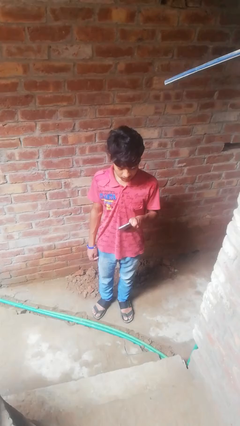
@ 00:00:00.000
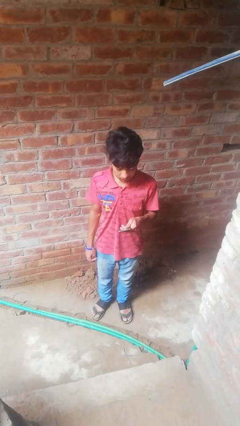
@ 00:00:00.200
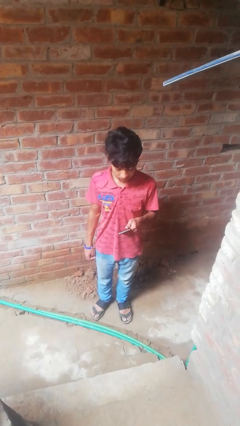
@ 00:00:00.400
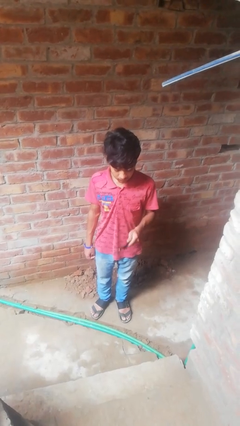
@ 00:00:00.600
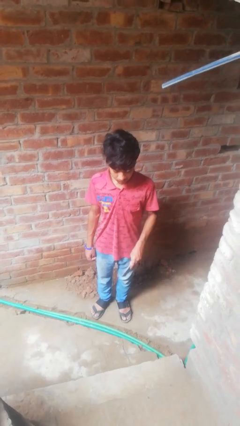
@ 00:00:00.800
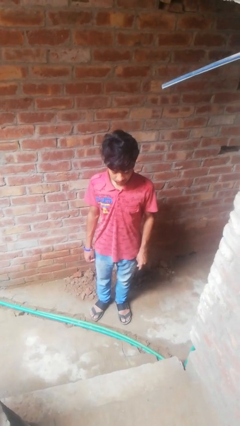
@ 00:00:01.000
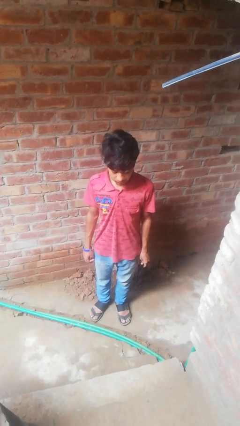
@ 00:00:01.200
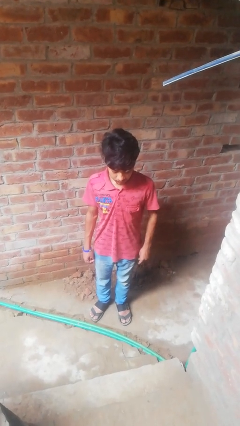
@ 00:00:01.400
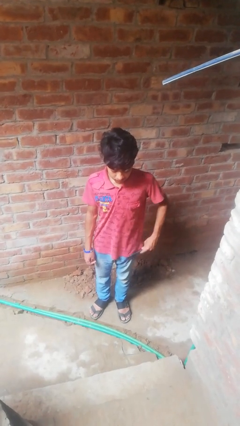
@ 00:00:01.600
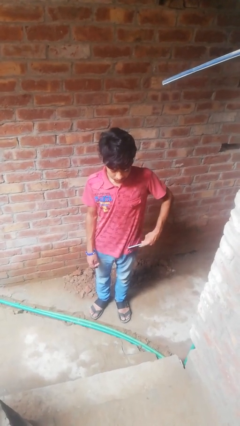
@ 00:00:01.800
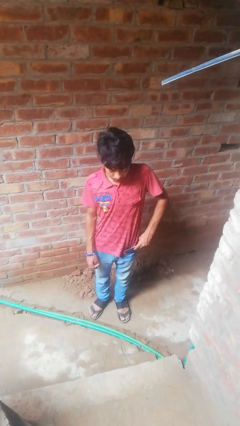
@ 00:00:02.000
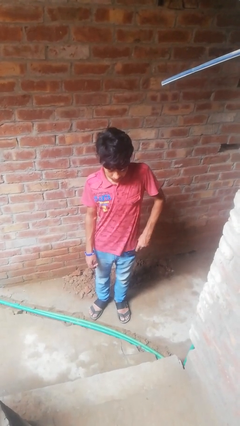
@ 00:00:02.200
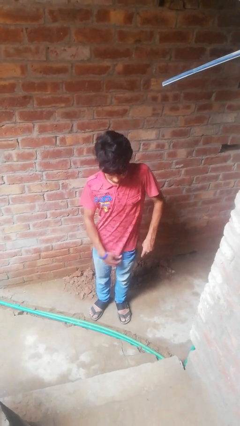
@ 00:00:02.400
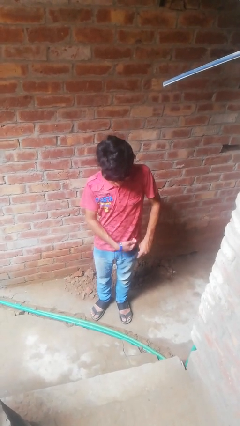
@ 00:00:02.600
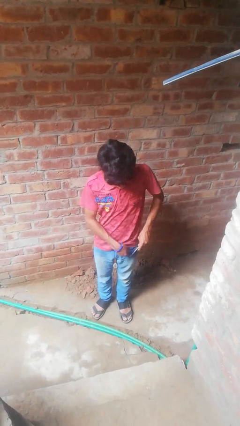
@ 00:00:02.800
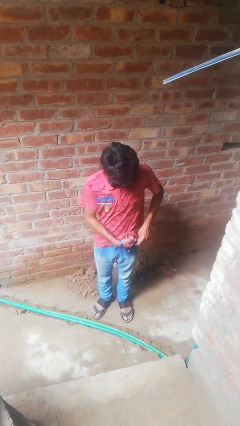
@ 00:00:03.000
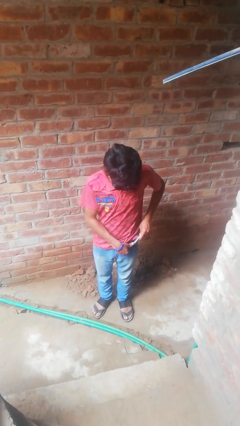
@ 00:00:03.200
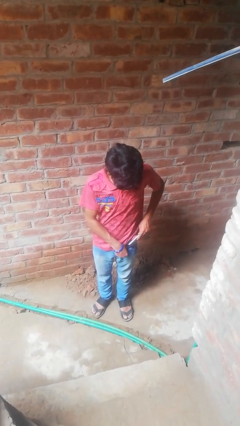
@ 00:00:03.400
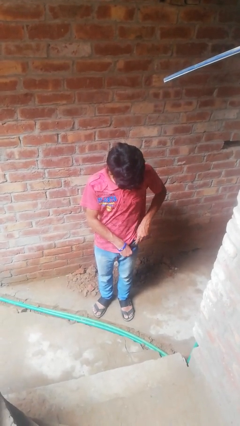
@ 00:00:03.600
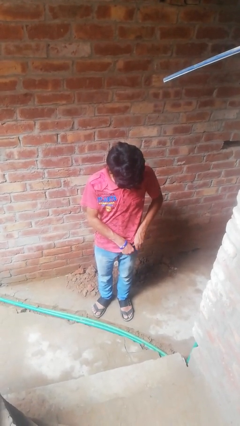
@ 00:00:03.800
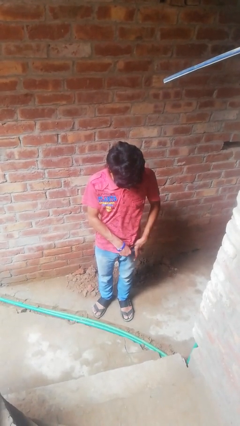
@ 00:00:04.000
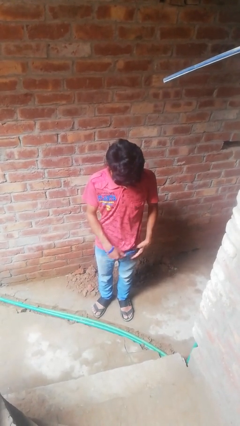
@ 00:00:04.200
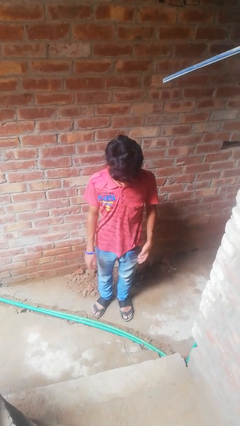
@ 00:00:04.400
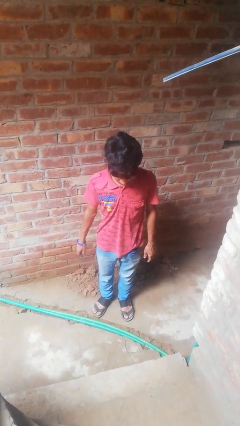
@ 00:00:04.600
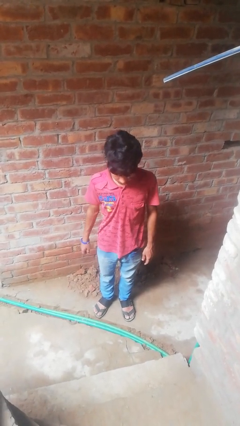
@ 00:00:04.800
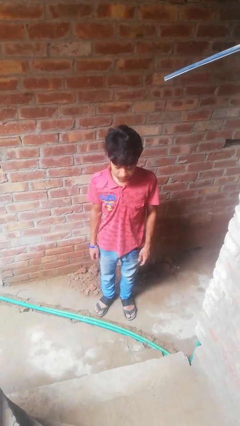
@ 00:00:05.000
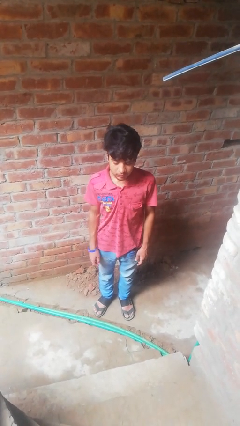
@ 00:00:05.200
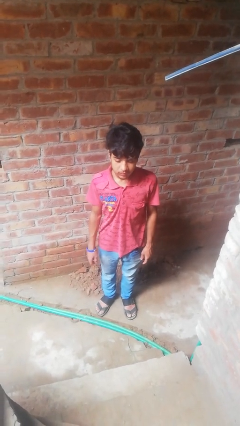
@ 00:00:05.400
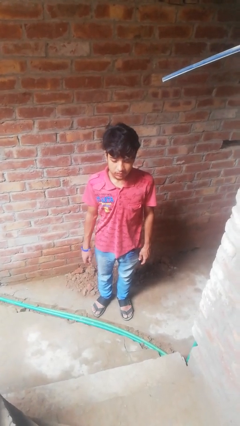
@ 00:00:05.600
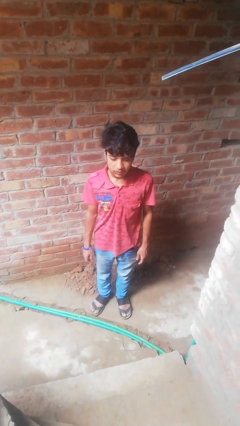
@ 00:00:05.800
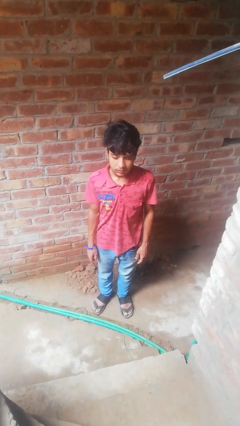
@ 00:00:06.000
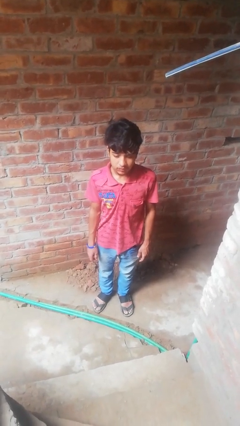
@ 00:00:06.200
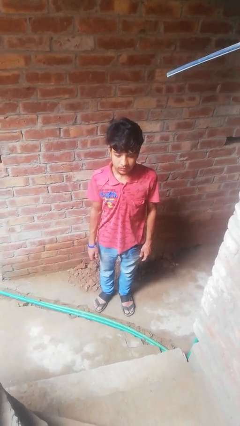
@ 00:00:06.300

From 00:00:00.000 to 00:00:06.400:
person puts phone into pocket

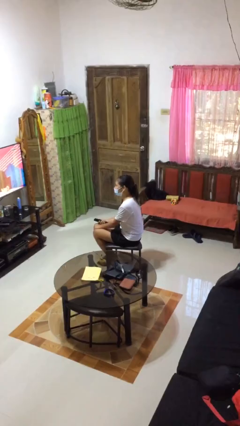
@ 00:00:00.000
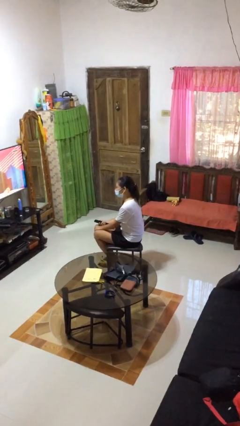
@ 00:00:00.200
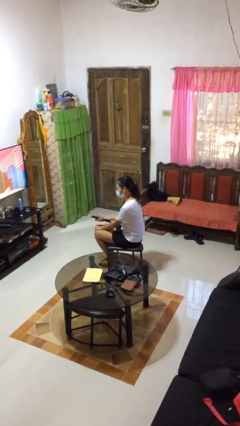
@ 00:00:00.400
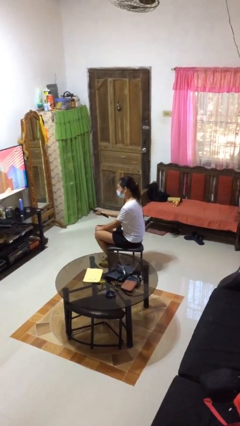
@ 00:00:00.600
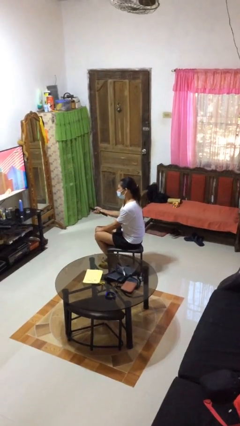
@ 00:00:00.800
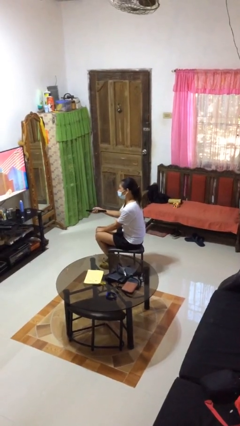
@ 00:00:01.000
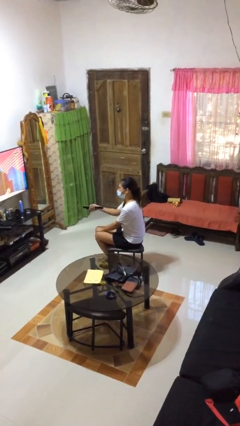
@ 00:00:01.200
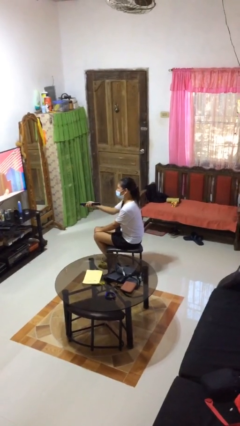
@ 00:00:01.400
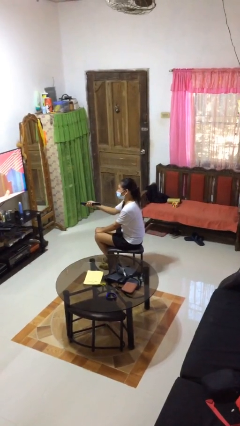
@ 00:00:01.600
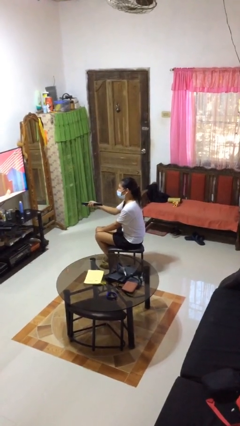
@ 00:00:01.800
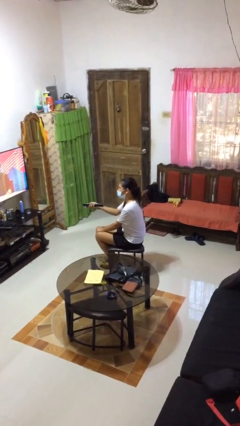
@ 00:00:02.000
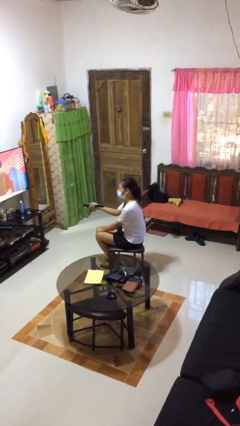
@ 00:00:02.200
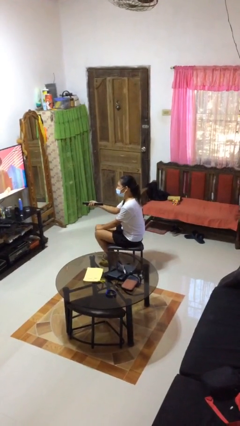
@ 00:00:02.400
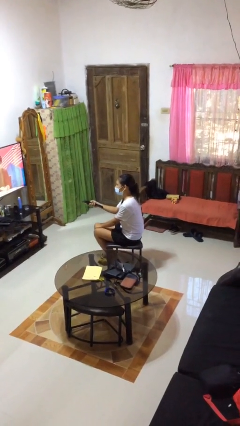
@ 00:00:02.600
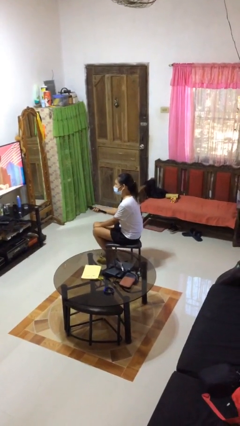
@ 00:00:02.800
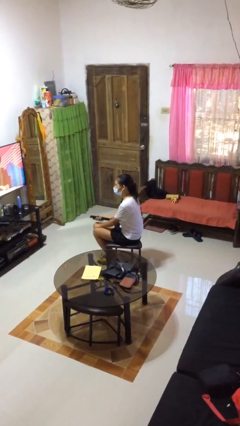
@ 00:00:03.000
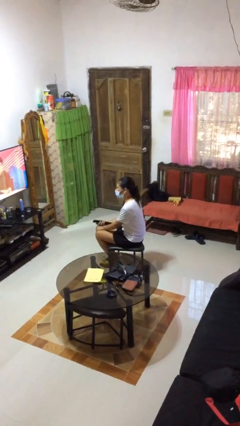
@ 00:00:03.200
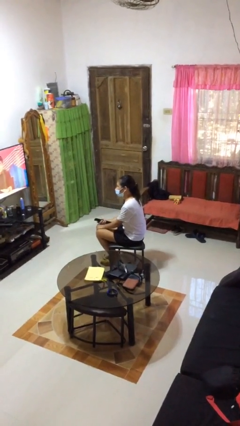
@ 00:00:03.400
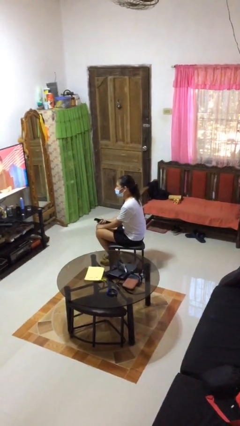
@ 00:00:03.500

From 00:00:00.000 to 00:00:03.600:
person uses television remote

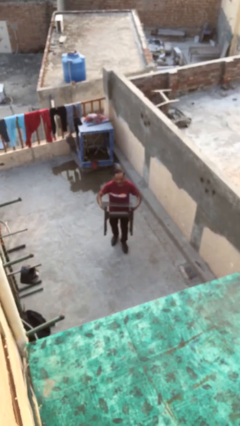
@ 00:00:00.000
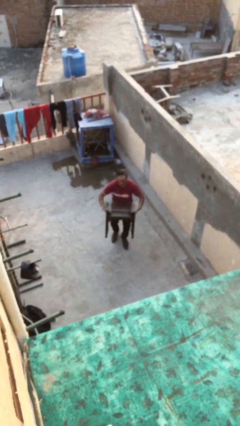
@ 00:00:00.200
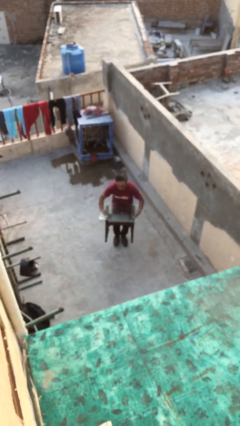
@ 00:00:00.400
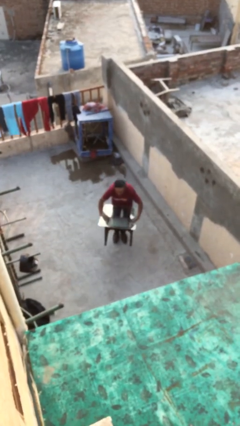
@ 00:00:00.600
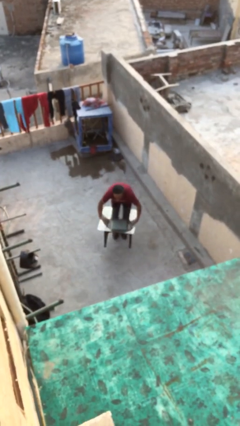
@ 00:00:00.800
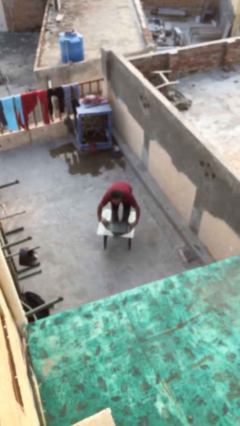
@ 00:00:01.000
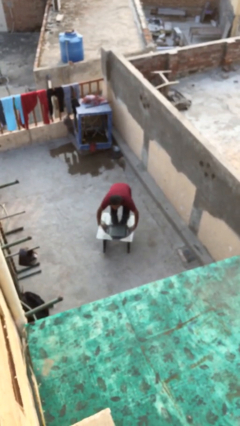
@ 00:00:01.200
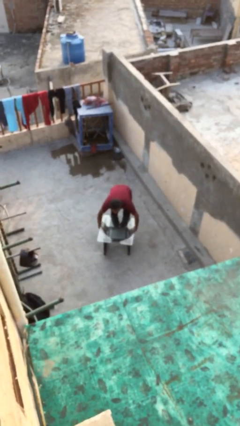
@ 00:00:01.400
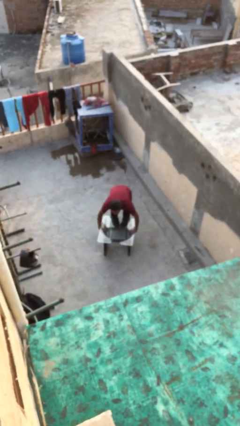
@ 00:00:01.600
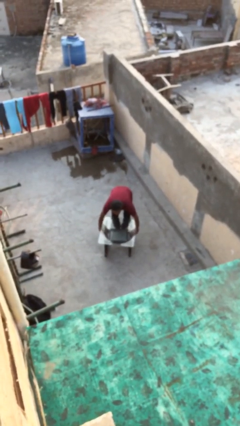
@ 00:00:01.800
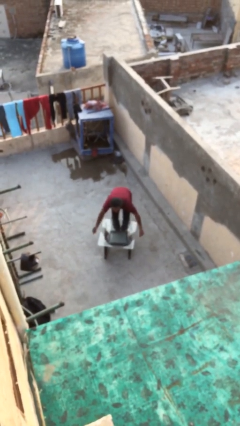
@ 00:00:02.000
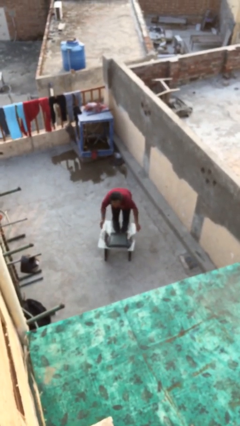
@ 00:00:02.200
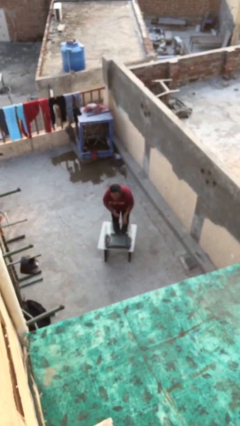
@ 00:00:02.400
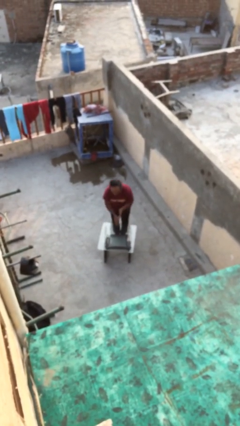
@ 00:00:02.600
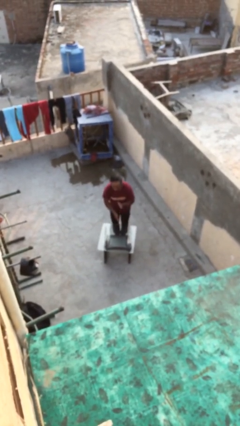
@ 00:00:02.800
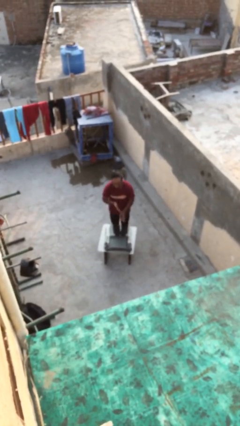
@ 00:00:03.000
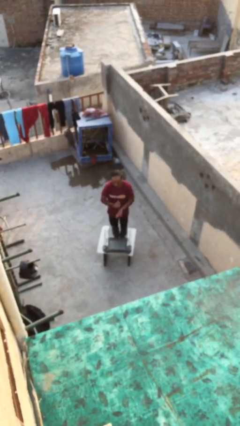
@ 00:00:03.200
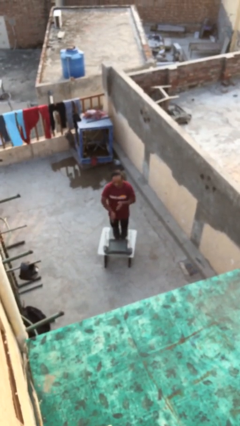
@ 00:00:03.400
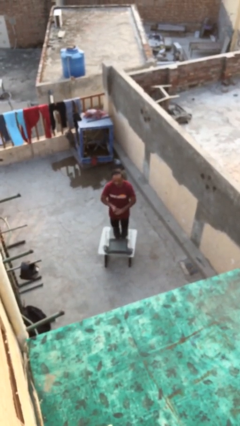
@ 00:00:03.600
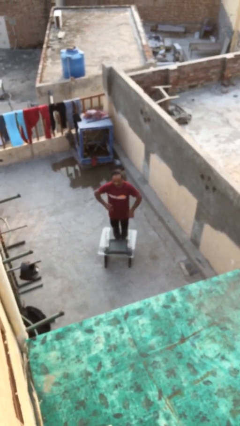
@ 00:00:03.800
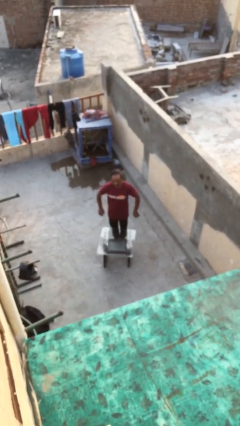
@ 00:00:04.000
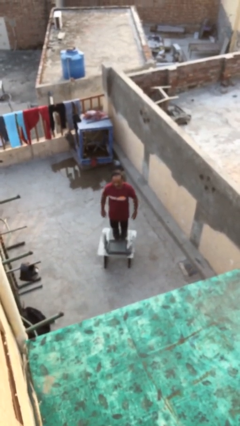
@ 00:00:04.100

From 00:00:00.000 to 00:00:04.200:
person puts down object on floor

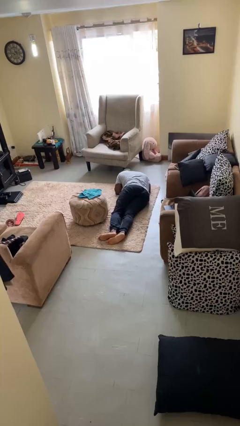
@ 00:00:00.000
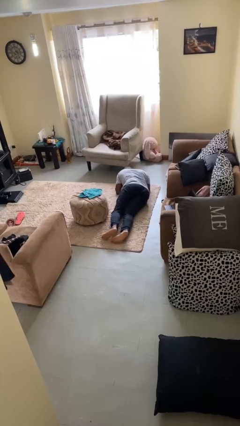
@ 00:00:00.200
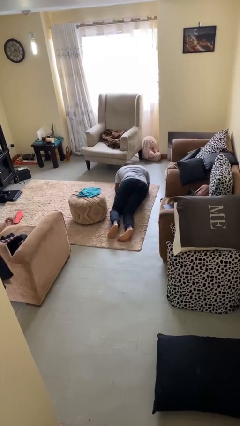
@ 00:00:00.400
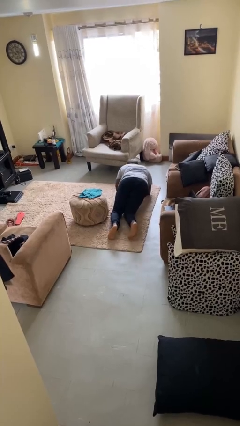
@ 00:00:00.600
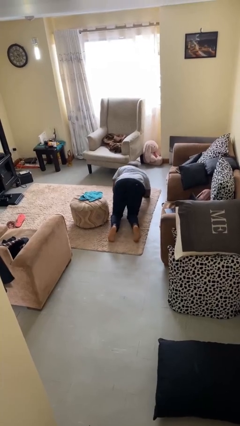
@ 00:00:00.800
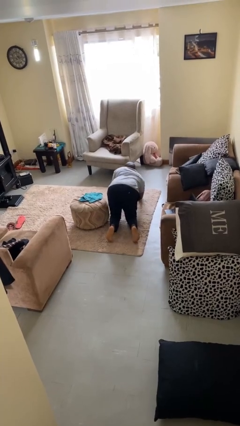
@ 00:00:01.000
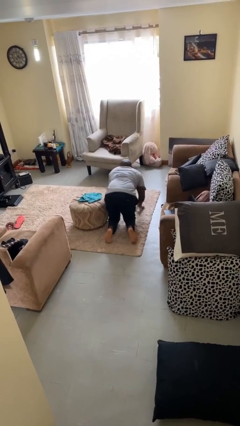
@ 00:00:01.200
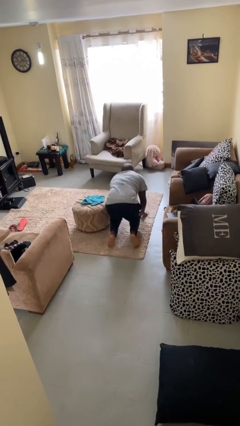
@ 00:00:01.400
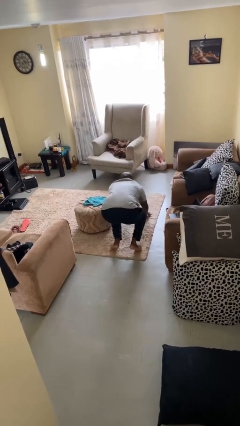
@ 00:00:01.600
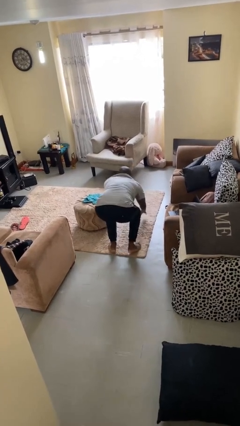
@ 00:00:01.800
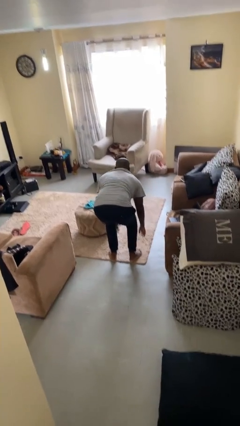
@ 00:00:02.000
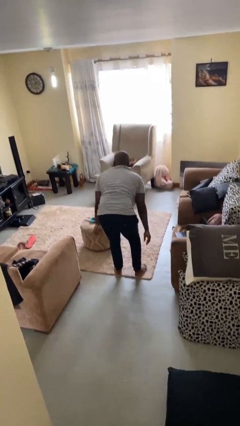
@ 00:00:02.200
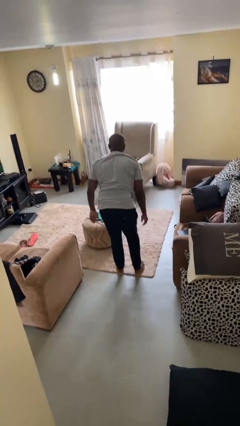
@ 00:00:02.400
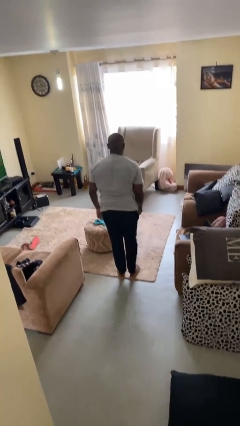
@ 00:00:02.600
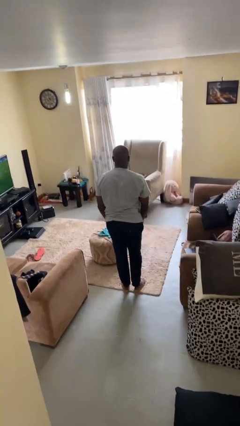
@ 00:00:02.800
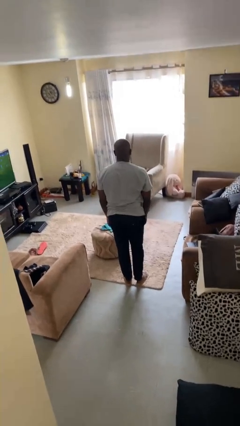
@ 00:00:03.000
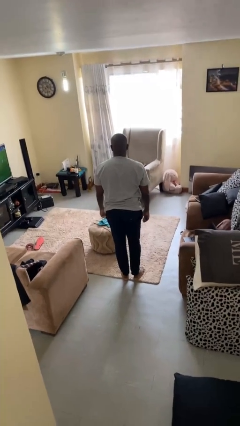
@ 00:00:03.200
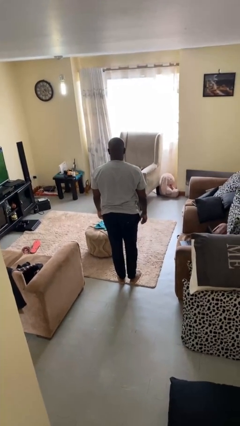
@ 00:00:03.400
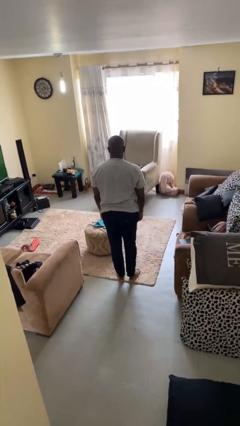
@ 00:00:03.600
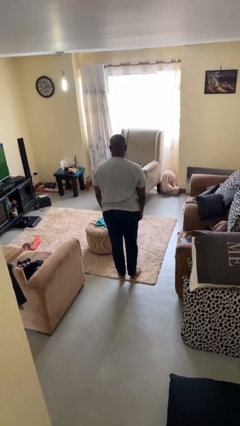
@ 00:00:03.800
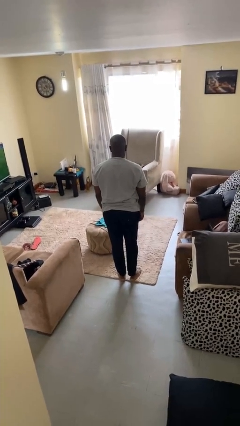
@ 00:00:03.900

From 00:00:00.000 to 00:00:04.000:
person stands up from floor
